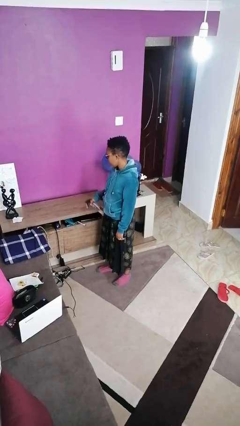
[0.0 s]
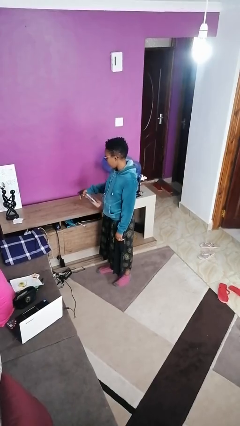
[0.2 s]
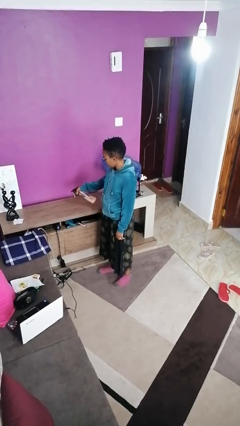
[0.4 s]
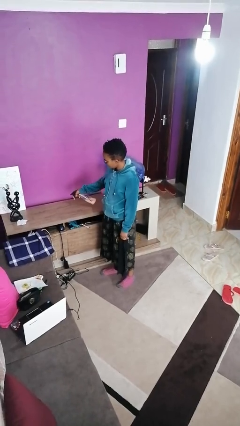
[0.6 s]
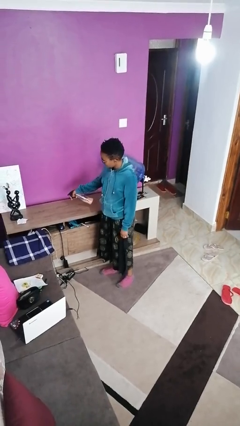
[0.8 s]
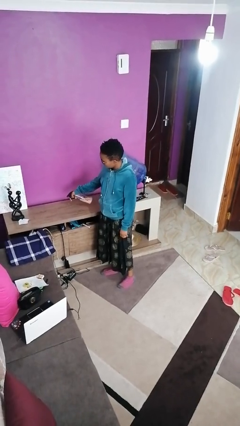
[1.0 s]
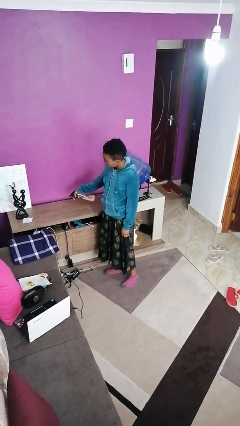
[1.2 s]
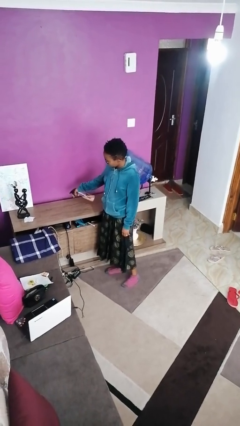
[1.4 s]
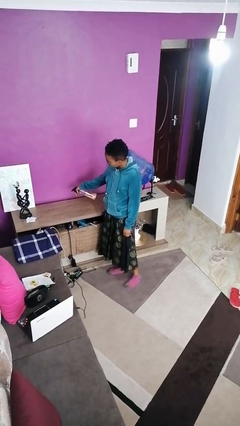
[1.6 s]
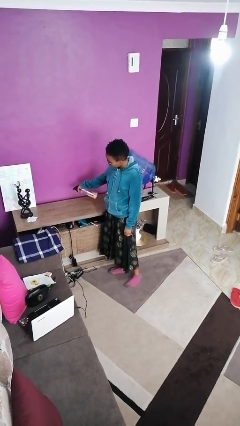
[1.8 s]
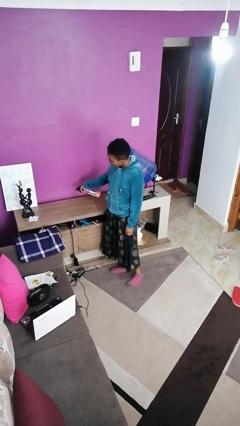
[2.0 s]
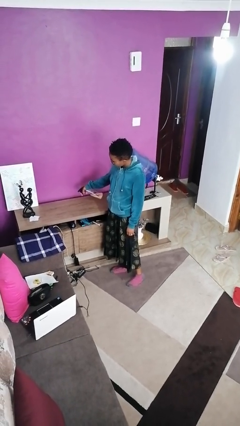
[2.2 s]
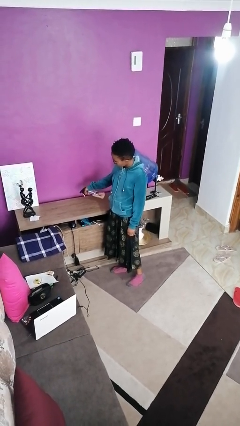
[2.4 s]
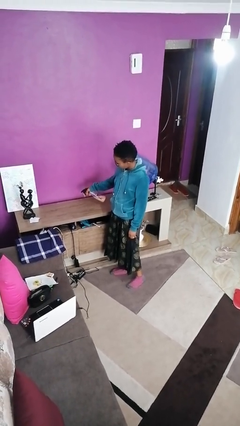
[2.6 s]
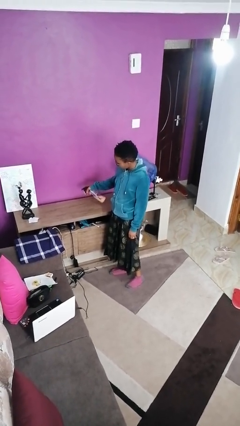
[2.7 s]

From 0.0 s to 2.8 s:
person sprays from bottle

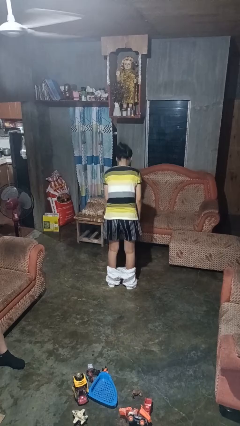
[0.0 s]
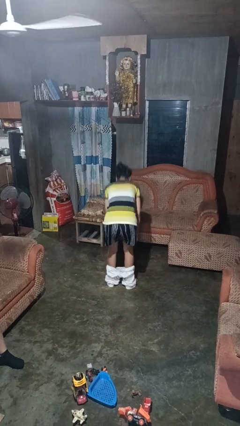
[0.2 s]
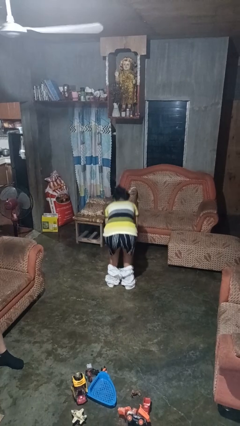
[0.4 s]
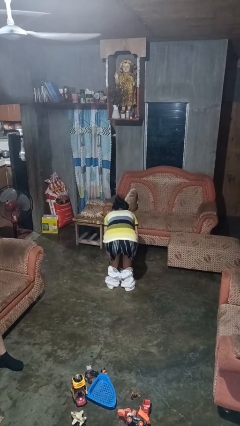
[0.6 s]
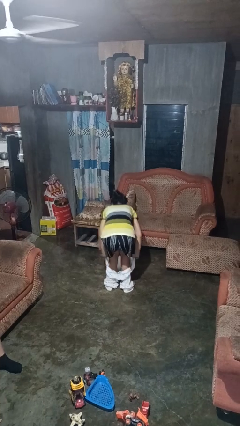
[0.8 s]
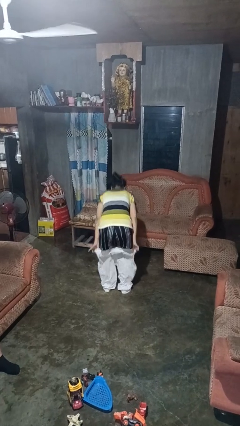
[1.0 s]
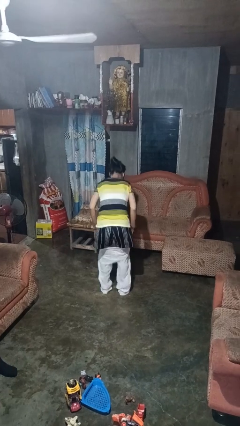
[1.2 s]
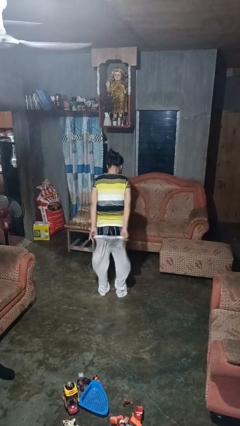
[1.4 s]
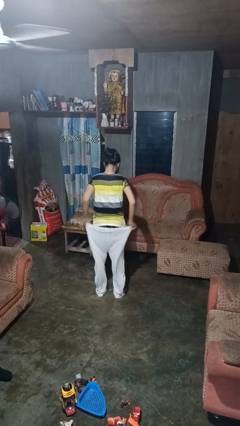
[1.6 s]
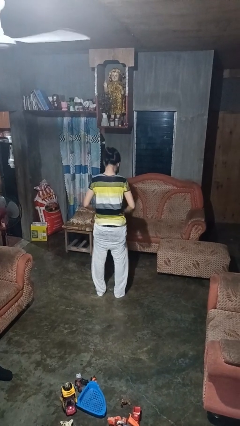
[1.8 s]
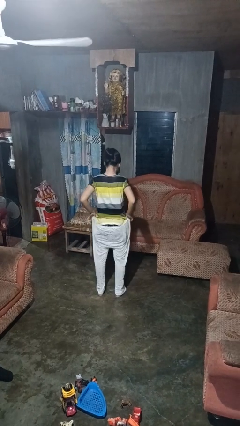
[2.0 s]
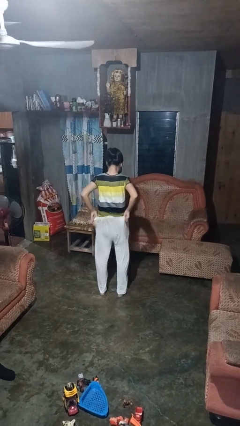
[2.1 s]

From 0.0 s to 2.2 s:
person puts on pants

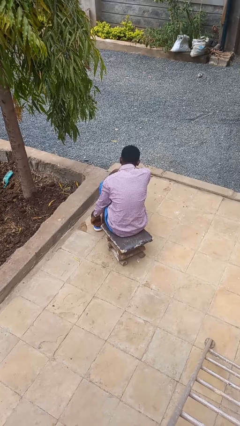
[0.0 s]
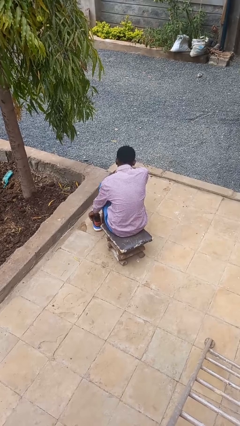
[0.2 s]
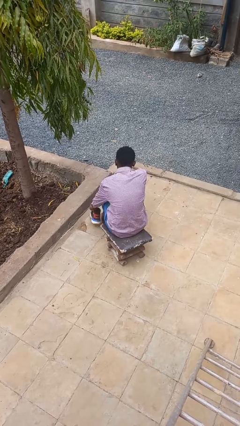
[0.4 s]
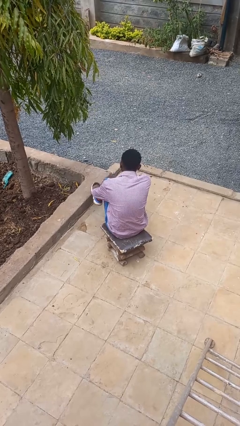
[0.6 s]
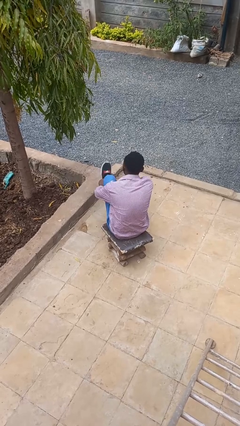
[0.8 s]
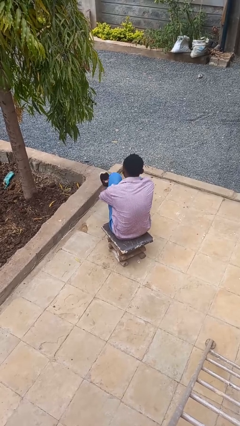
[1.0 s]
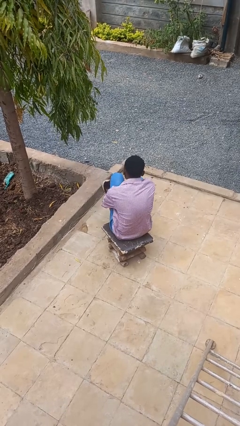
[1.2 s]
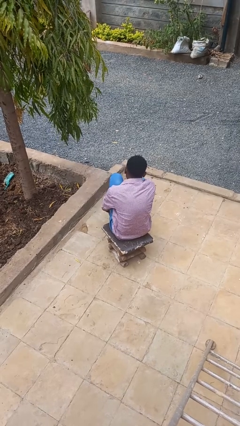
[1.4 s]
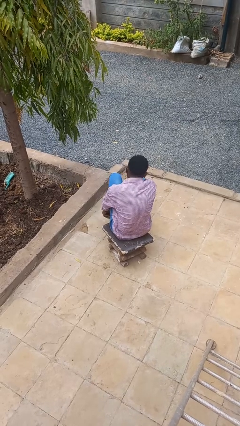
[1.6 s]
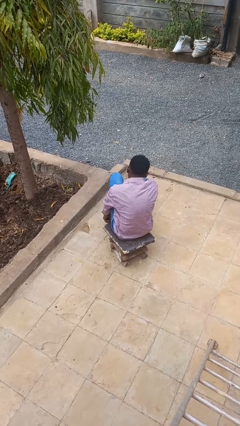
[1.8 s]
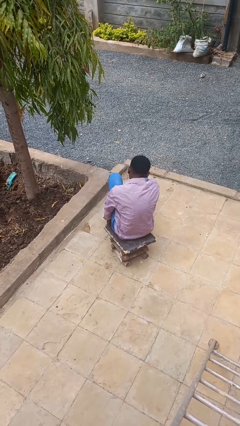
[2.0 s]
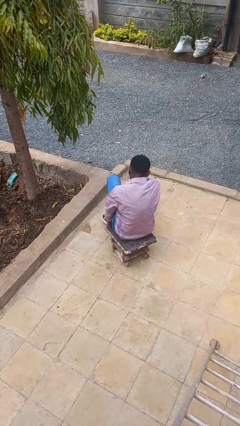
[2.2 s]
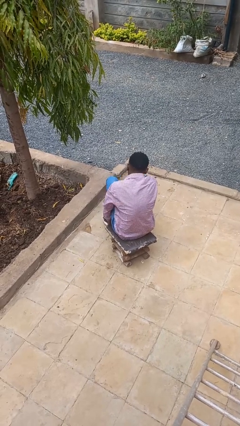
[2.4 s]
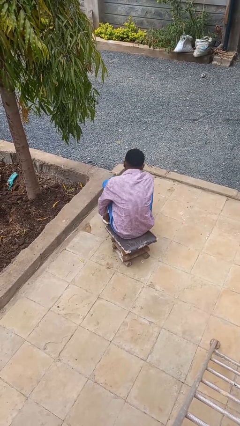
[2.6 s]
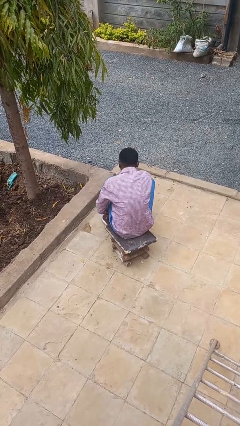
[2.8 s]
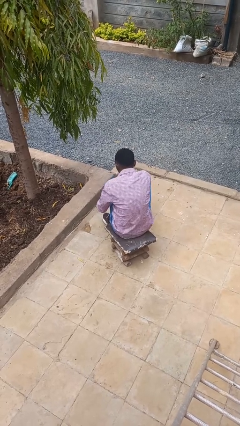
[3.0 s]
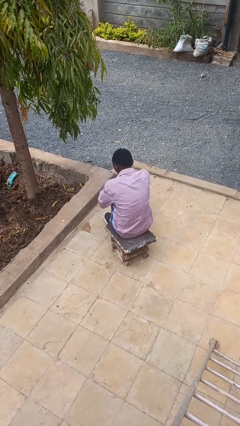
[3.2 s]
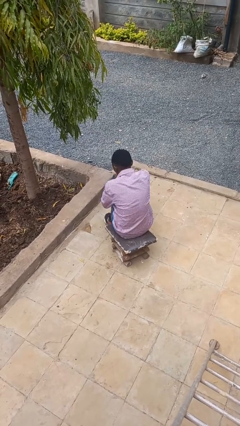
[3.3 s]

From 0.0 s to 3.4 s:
person puts on shoes

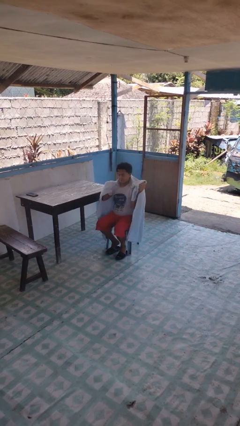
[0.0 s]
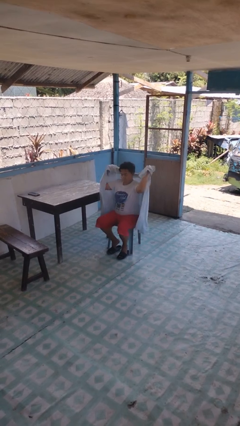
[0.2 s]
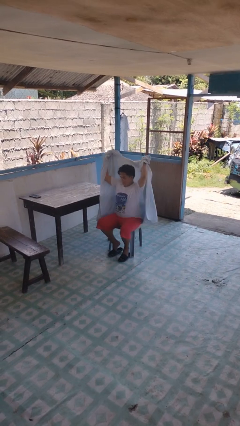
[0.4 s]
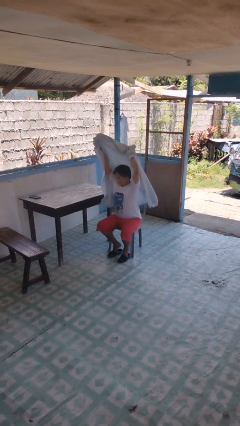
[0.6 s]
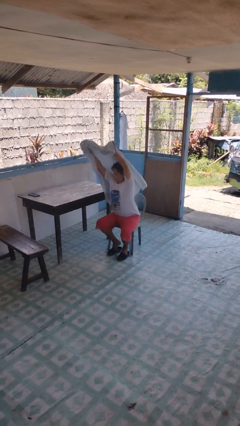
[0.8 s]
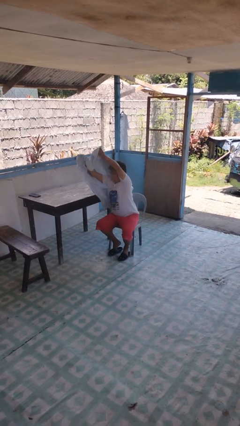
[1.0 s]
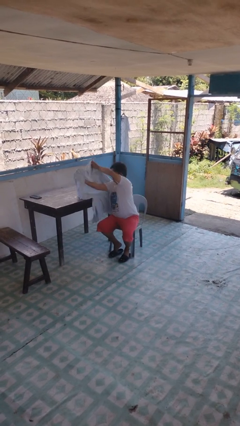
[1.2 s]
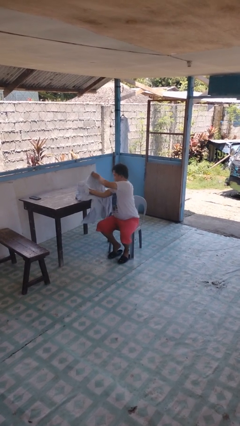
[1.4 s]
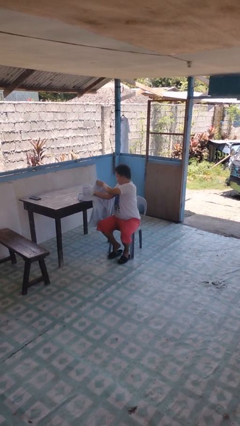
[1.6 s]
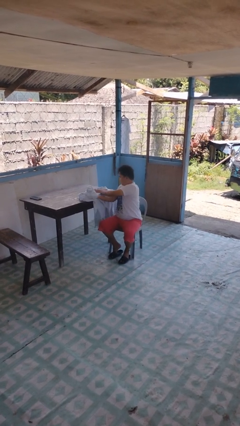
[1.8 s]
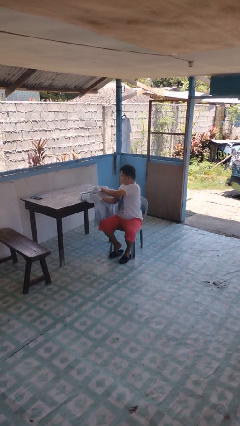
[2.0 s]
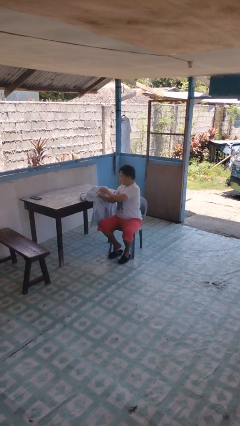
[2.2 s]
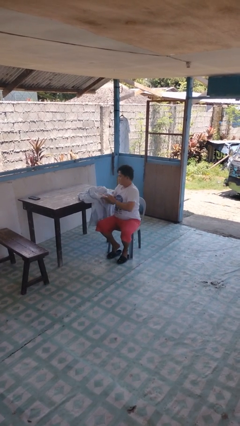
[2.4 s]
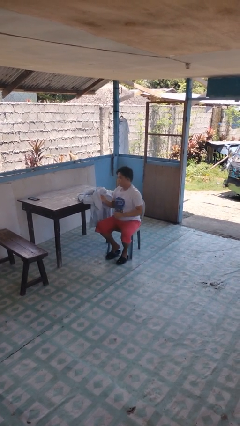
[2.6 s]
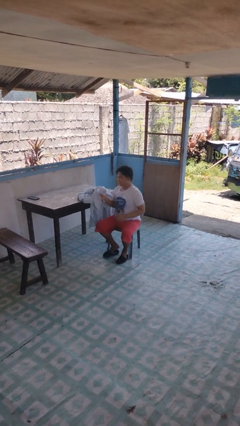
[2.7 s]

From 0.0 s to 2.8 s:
person uncovers with blanket

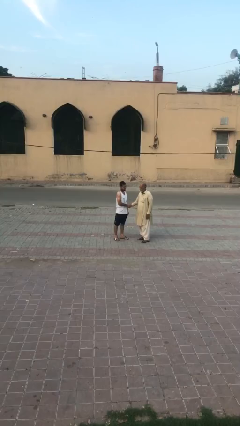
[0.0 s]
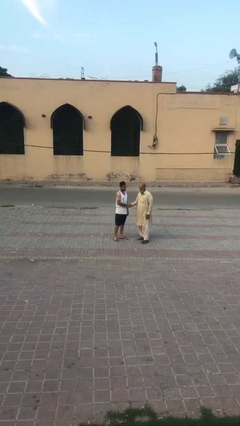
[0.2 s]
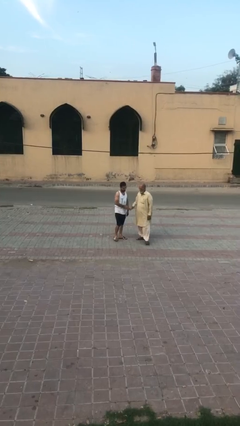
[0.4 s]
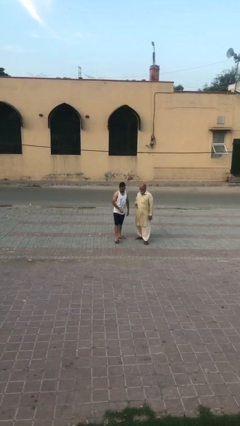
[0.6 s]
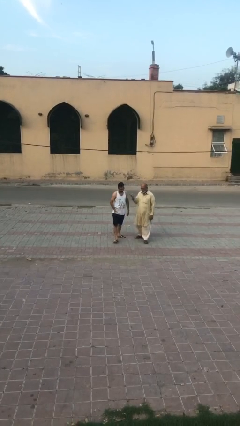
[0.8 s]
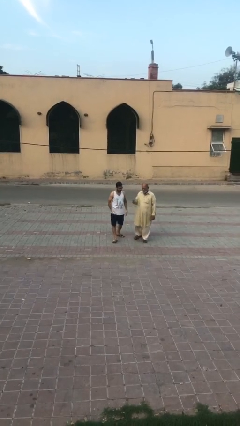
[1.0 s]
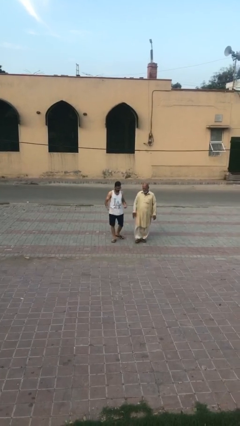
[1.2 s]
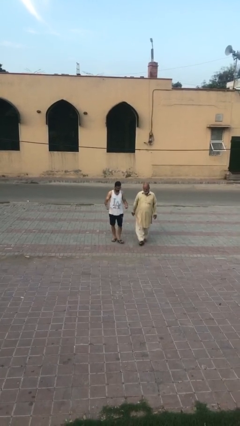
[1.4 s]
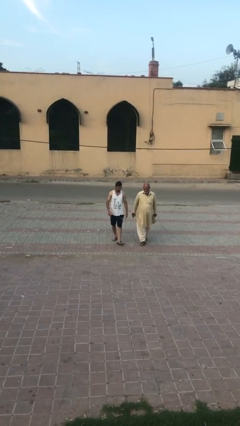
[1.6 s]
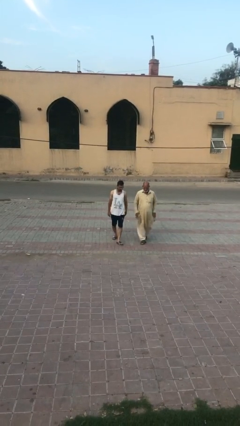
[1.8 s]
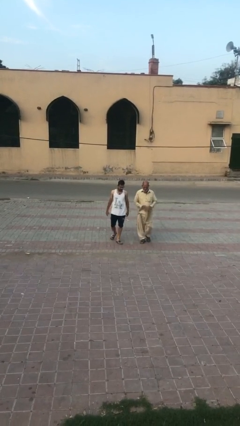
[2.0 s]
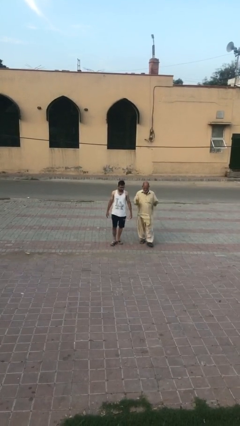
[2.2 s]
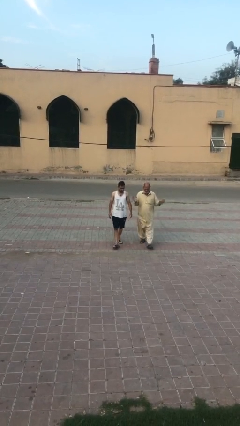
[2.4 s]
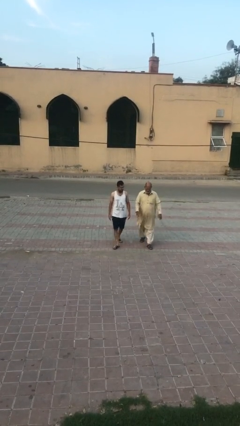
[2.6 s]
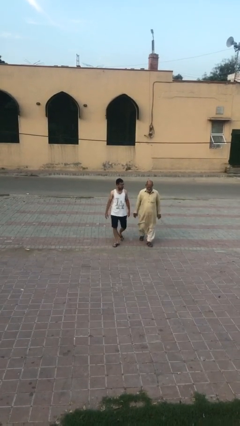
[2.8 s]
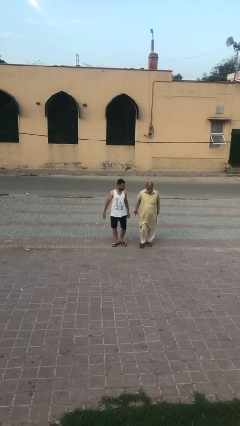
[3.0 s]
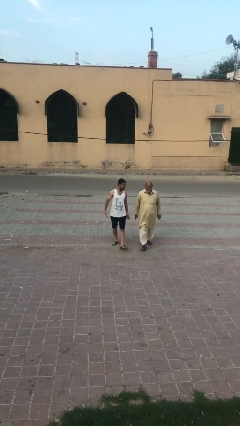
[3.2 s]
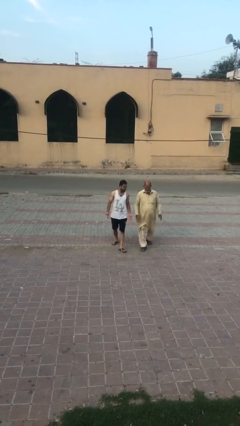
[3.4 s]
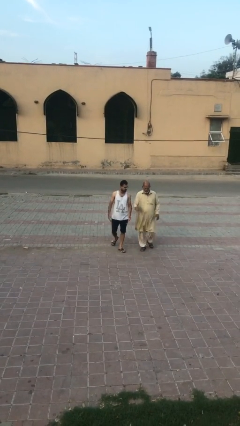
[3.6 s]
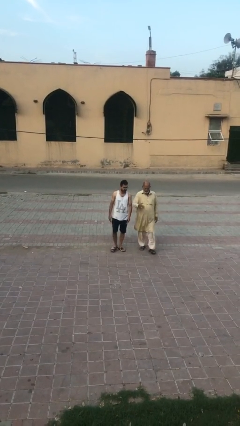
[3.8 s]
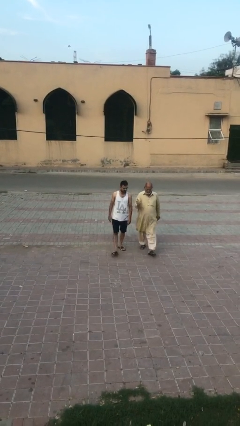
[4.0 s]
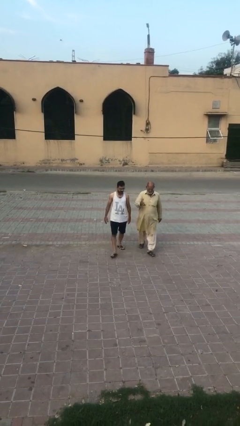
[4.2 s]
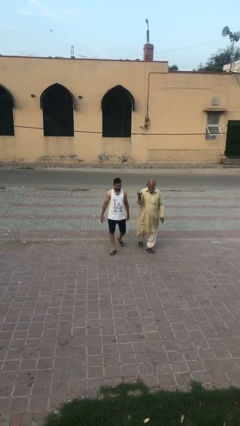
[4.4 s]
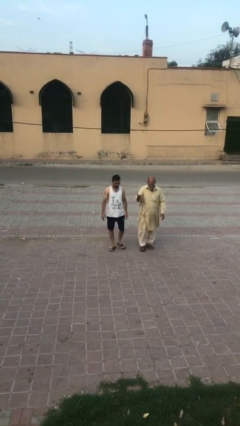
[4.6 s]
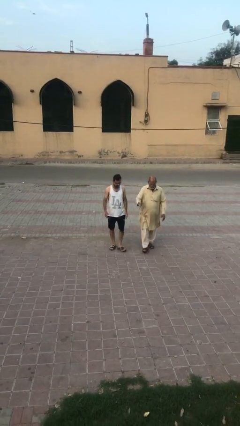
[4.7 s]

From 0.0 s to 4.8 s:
person talks to person

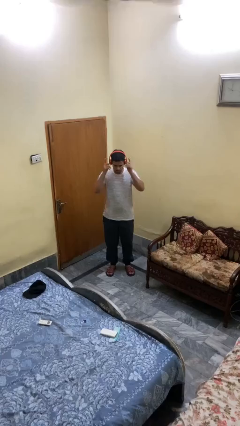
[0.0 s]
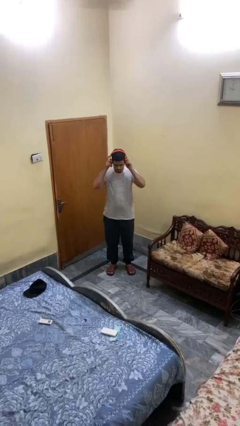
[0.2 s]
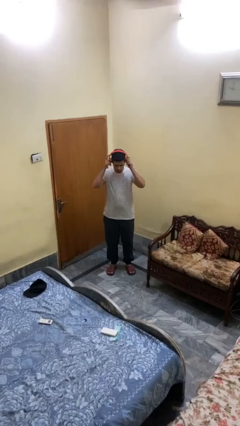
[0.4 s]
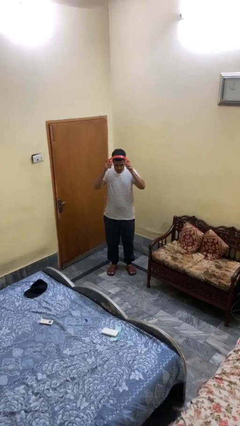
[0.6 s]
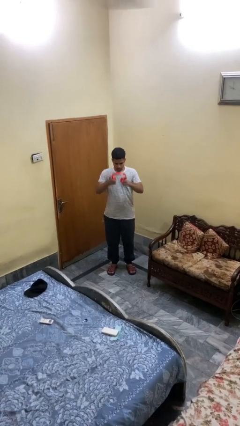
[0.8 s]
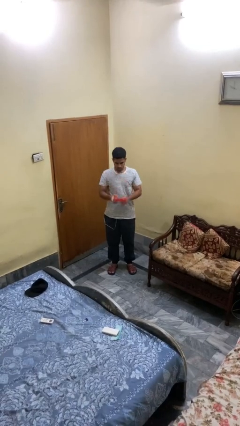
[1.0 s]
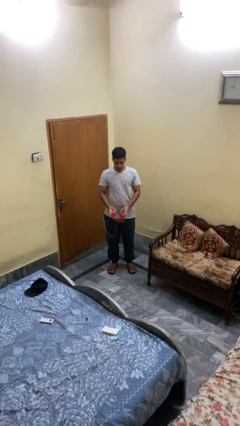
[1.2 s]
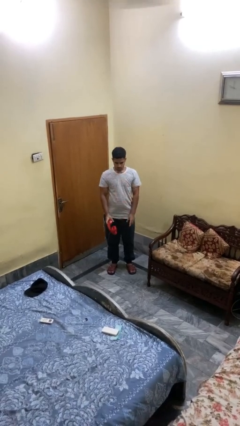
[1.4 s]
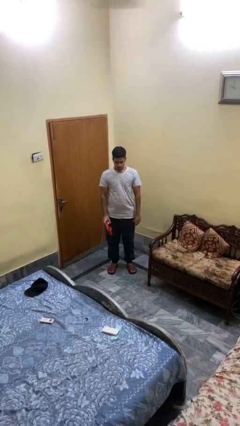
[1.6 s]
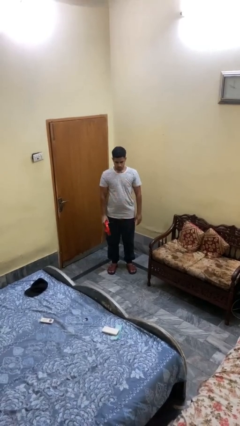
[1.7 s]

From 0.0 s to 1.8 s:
person takes off headphones
